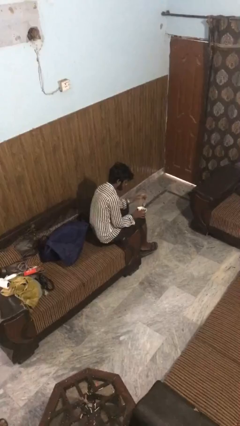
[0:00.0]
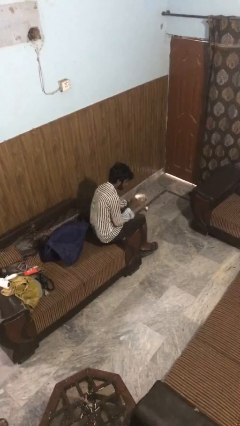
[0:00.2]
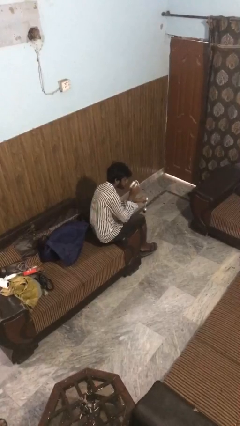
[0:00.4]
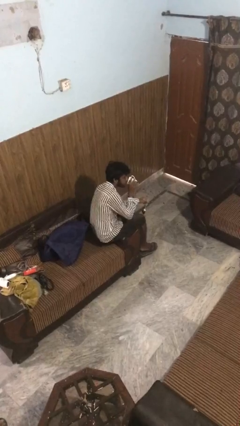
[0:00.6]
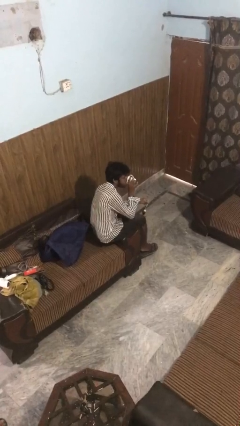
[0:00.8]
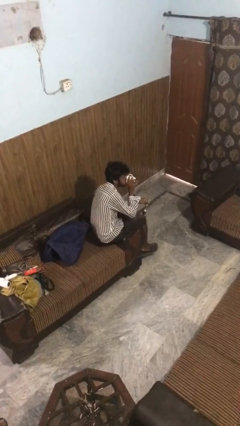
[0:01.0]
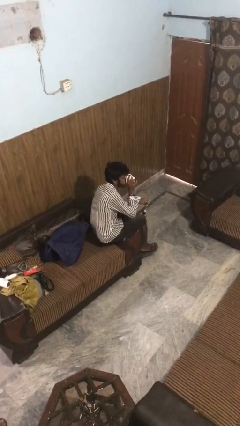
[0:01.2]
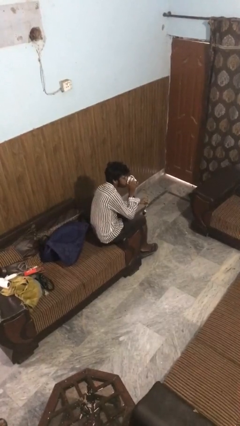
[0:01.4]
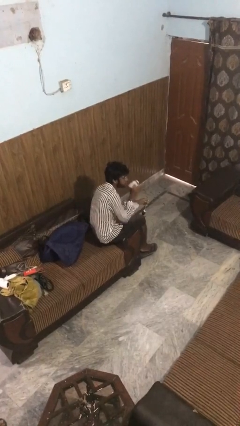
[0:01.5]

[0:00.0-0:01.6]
person drinks from mug

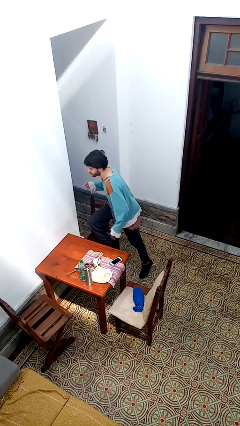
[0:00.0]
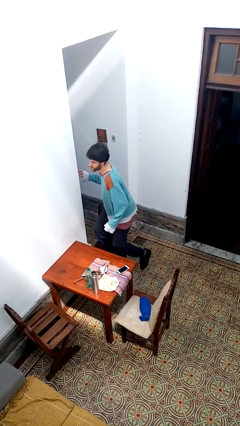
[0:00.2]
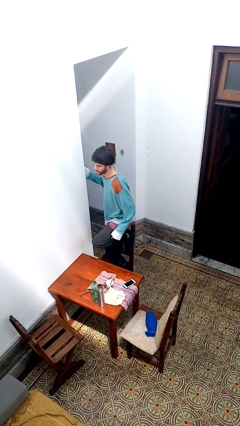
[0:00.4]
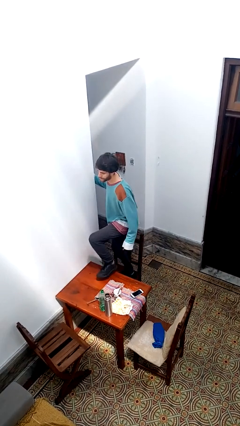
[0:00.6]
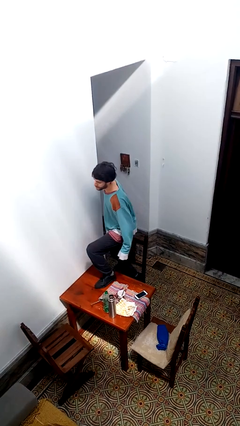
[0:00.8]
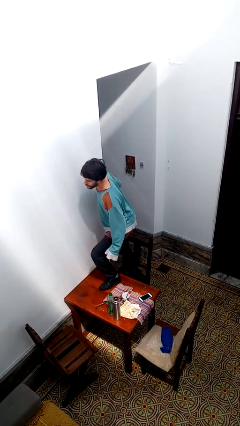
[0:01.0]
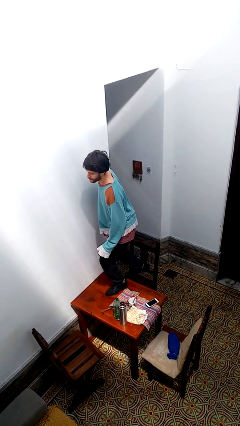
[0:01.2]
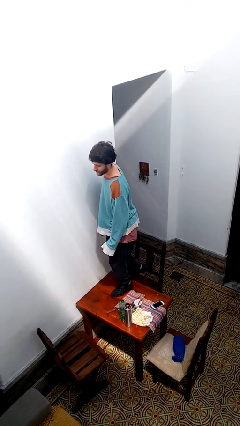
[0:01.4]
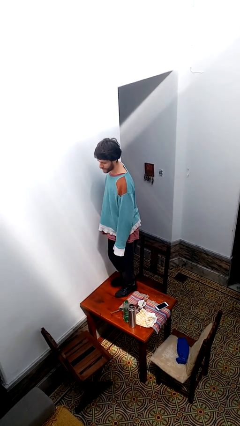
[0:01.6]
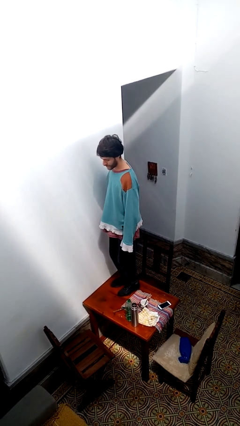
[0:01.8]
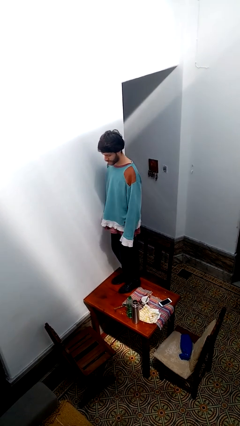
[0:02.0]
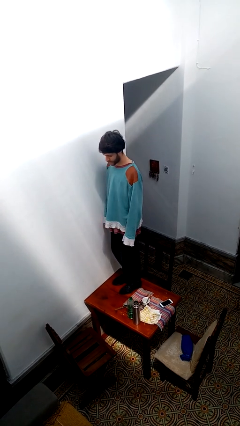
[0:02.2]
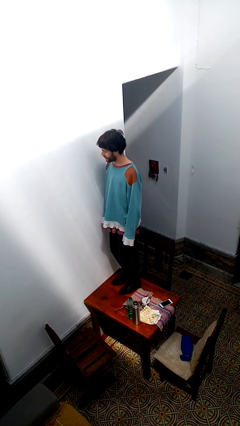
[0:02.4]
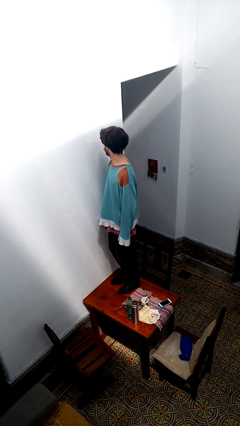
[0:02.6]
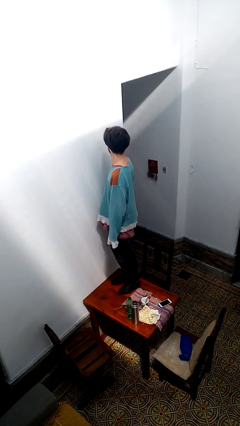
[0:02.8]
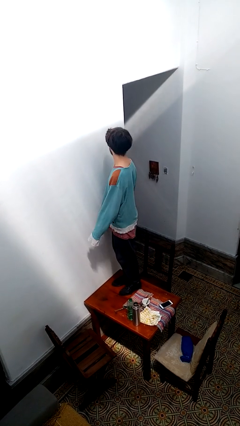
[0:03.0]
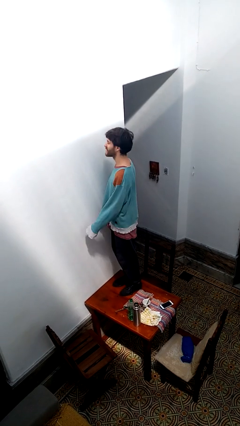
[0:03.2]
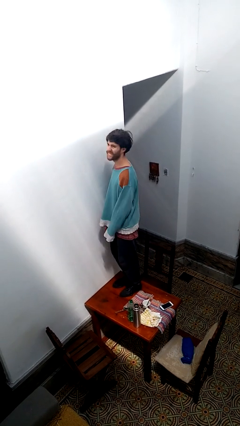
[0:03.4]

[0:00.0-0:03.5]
person climbs on table

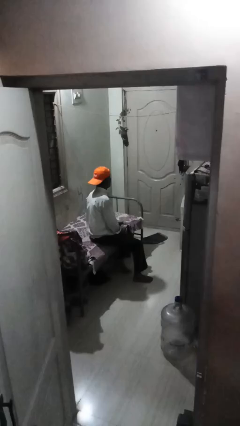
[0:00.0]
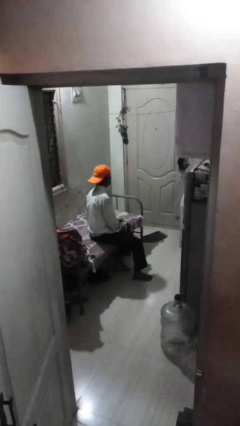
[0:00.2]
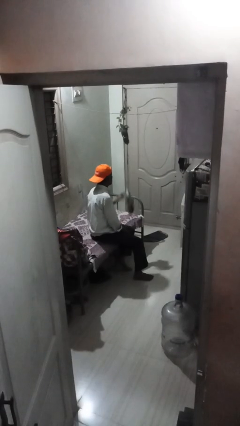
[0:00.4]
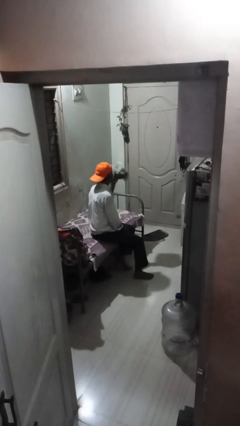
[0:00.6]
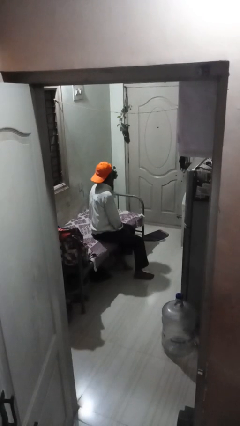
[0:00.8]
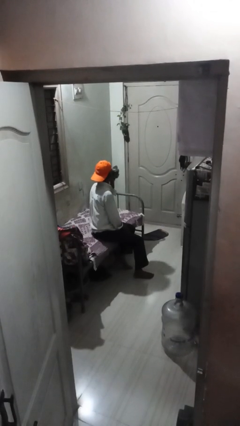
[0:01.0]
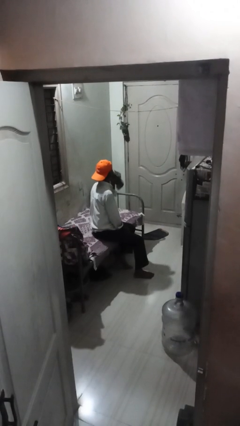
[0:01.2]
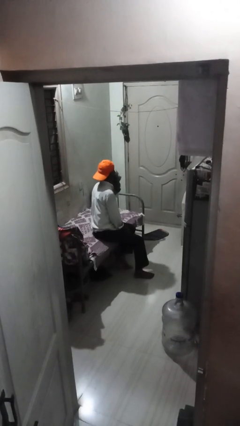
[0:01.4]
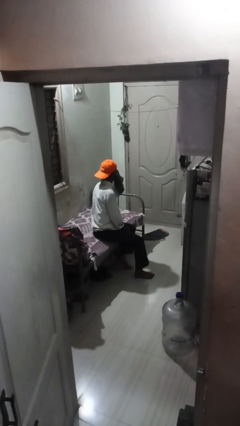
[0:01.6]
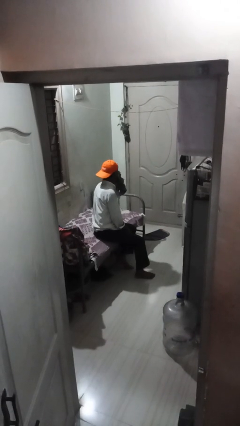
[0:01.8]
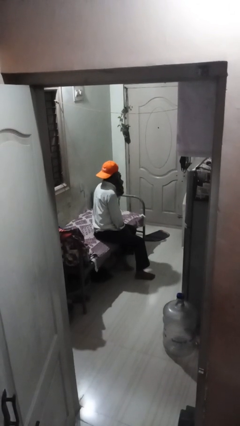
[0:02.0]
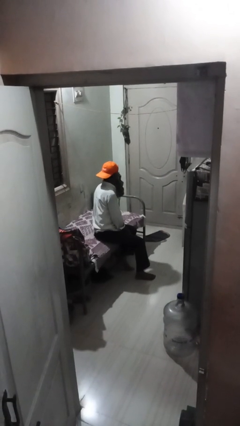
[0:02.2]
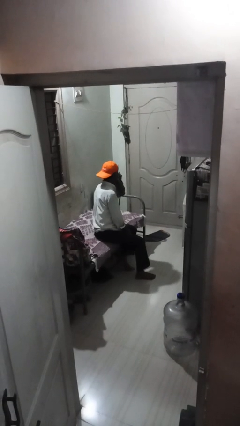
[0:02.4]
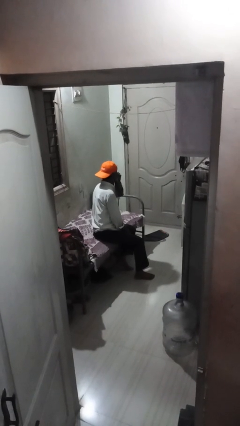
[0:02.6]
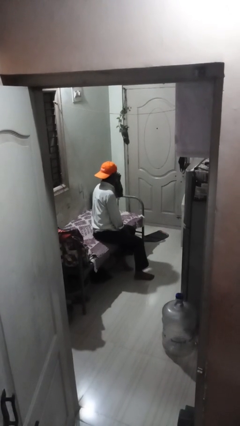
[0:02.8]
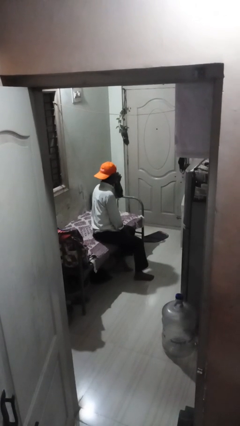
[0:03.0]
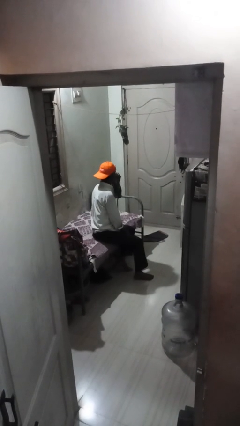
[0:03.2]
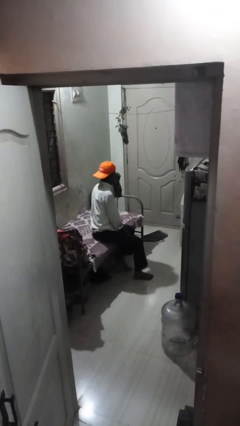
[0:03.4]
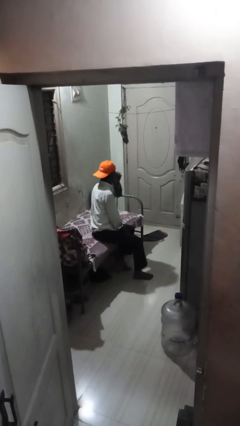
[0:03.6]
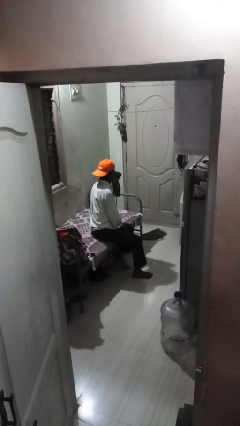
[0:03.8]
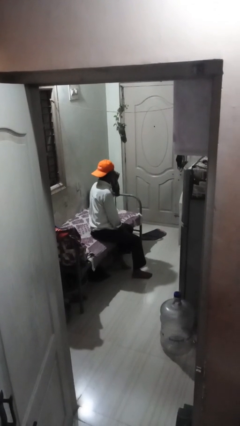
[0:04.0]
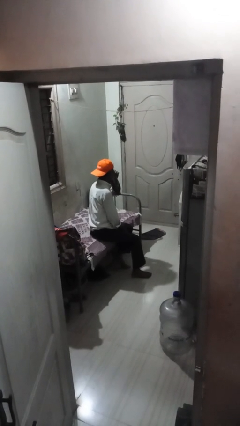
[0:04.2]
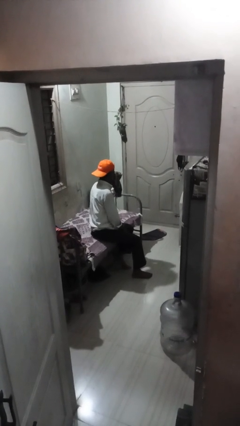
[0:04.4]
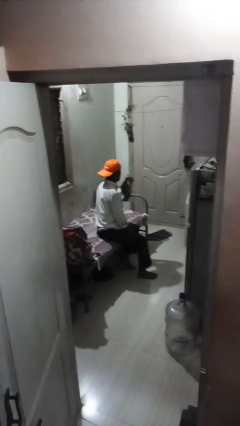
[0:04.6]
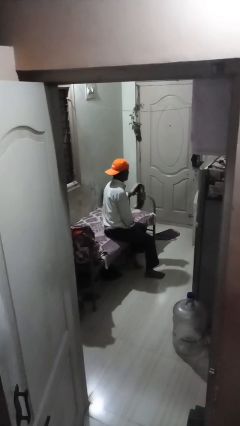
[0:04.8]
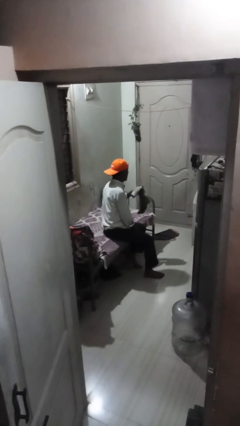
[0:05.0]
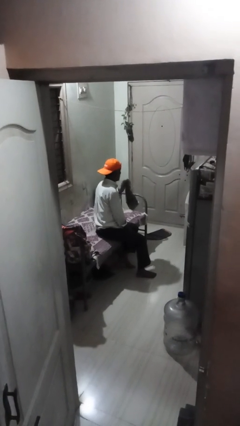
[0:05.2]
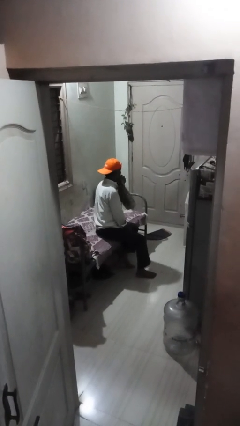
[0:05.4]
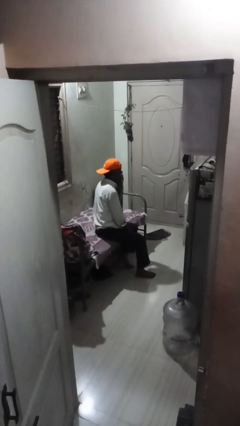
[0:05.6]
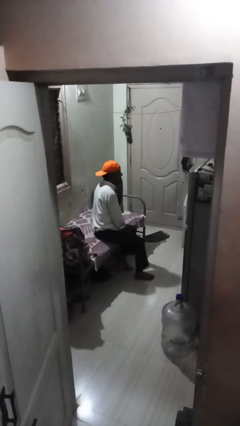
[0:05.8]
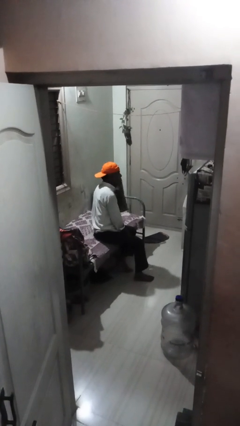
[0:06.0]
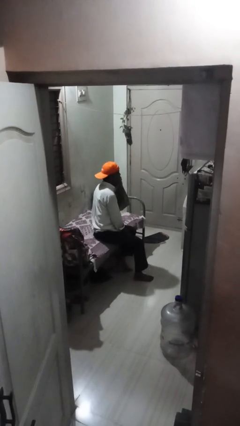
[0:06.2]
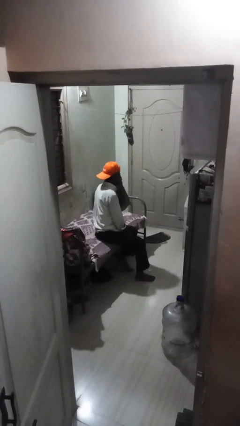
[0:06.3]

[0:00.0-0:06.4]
person wipes mouth with napkin

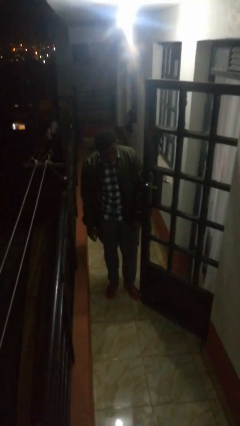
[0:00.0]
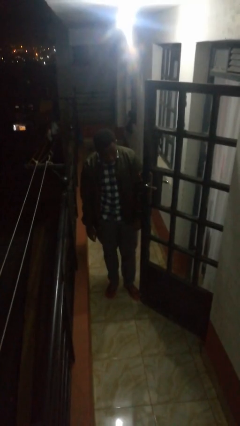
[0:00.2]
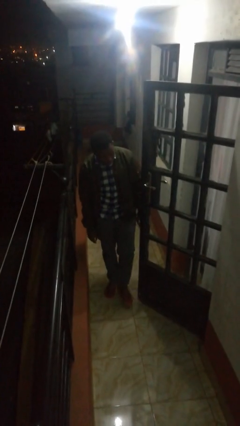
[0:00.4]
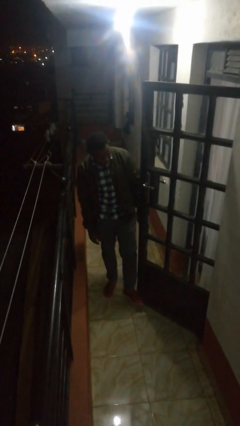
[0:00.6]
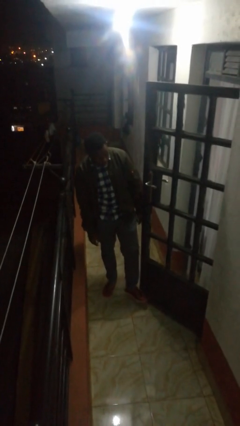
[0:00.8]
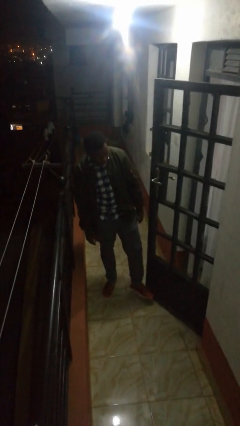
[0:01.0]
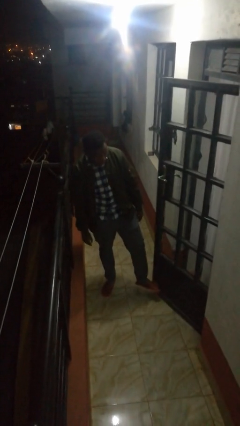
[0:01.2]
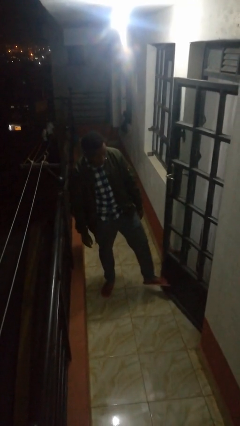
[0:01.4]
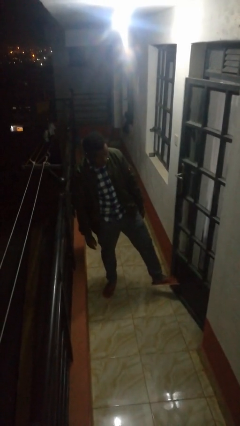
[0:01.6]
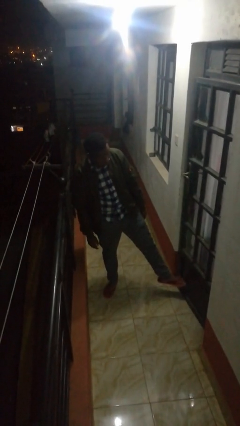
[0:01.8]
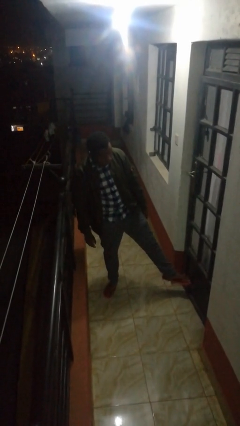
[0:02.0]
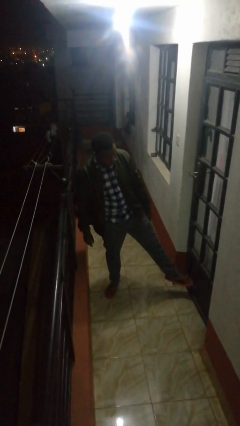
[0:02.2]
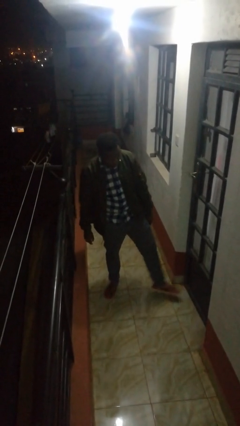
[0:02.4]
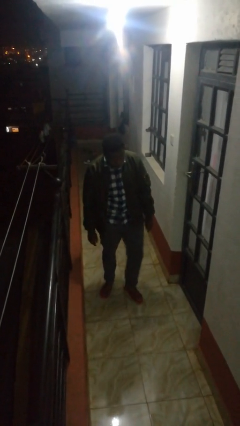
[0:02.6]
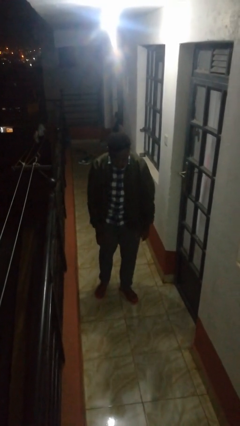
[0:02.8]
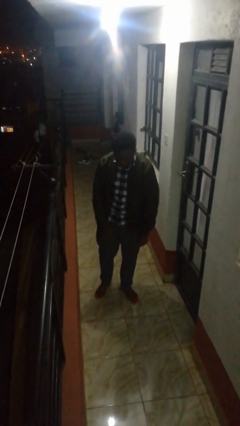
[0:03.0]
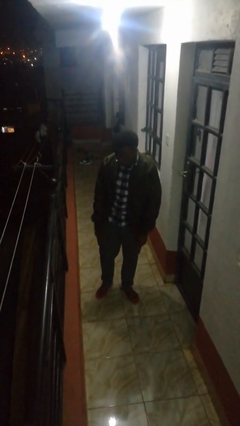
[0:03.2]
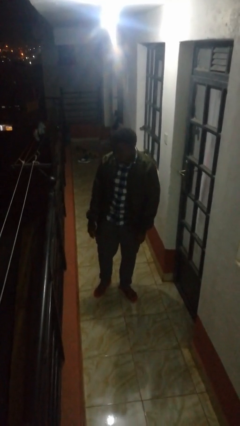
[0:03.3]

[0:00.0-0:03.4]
person closes door with foot

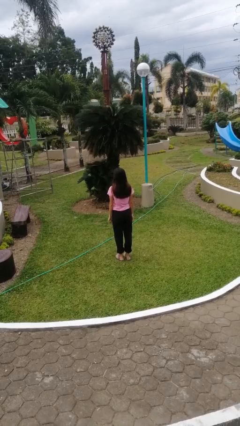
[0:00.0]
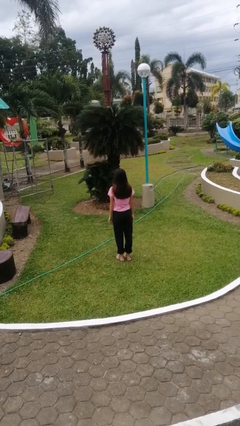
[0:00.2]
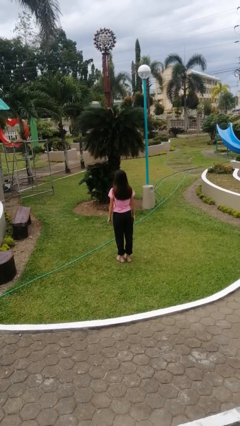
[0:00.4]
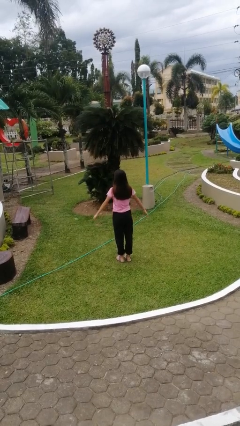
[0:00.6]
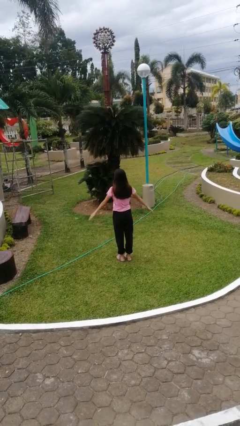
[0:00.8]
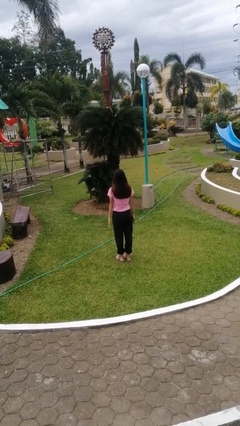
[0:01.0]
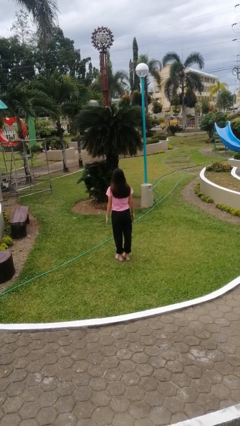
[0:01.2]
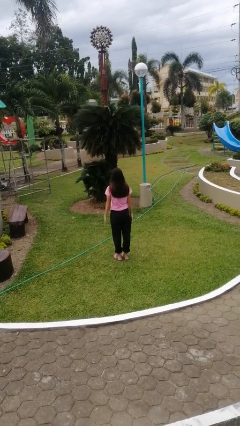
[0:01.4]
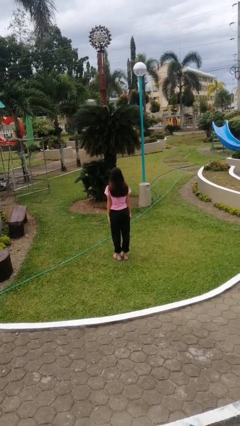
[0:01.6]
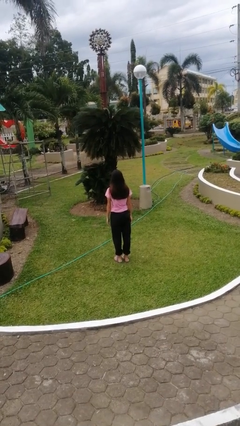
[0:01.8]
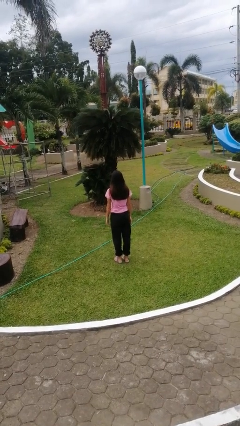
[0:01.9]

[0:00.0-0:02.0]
person slaps hands on thighs

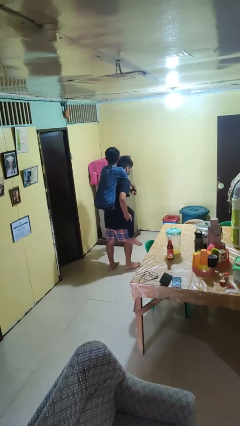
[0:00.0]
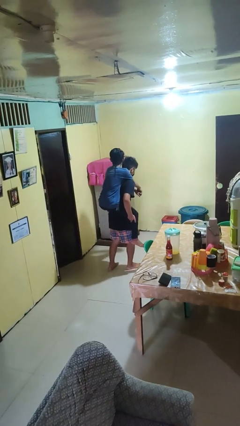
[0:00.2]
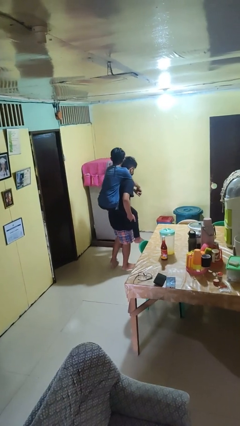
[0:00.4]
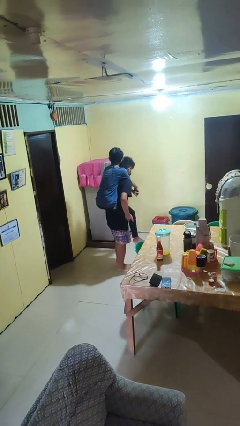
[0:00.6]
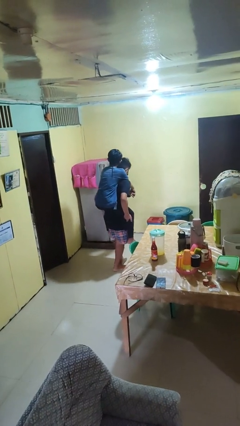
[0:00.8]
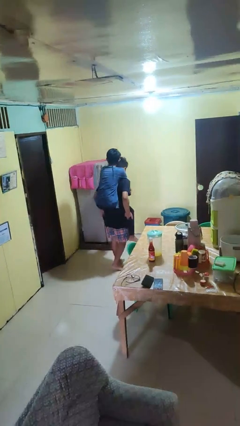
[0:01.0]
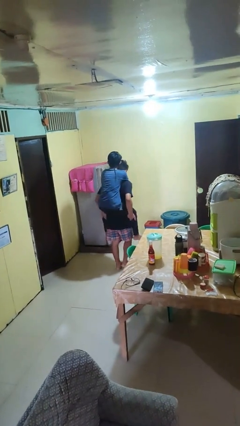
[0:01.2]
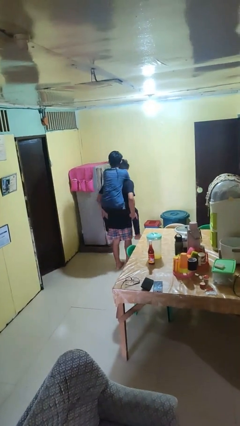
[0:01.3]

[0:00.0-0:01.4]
person carries person on back
